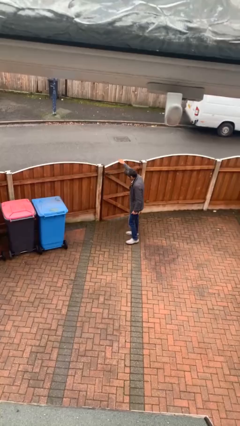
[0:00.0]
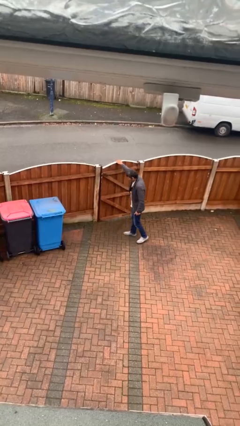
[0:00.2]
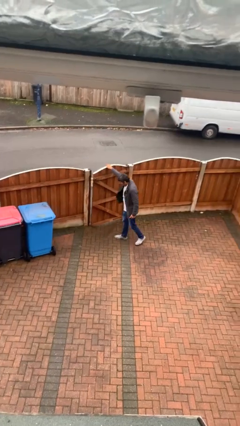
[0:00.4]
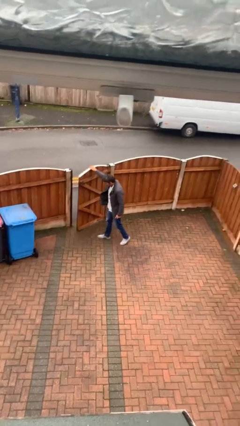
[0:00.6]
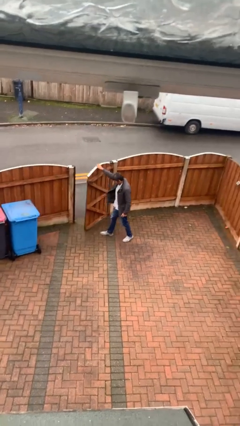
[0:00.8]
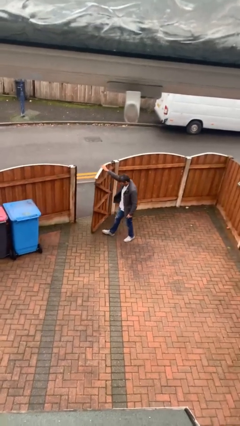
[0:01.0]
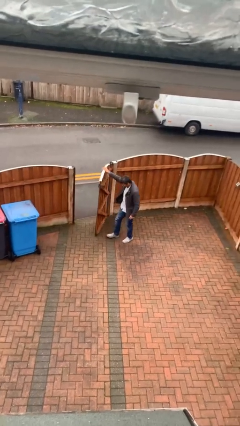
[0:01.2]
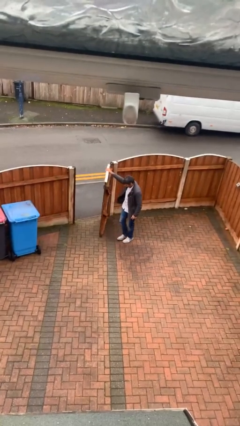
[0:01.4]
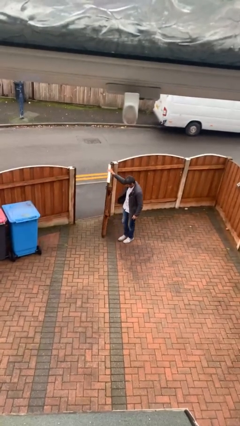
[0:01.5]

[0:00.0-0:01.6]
person opens facility door

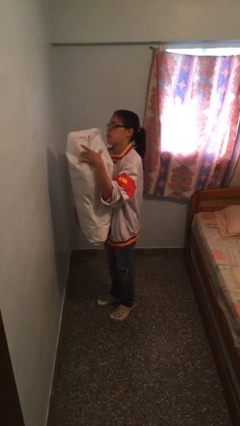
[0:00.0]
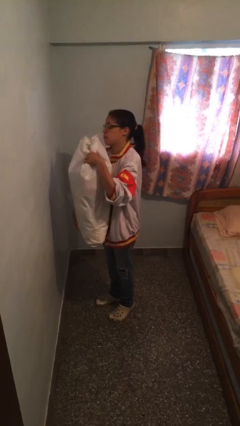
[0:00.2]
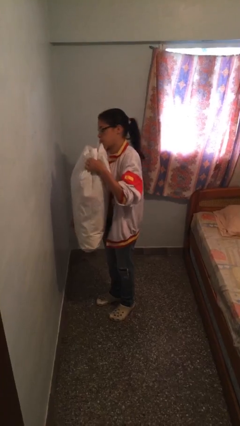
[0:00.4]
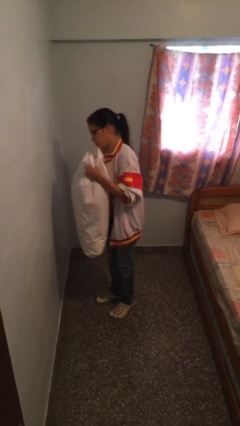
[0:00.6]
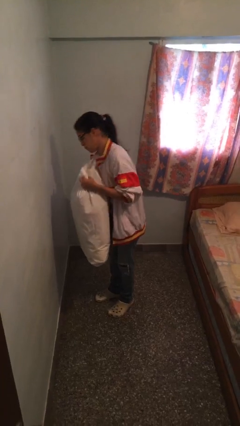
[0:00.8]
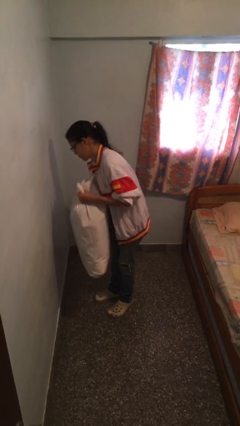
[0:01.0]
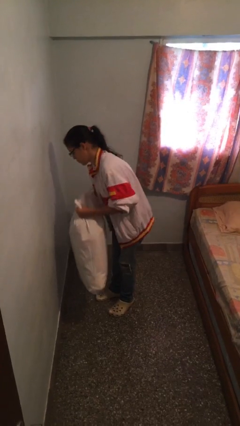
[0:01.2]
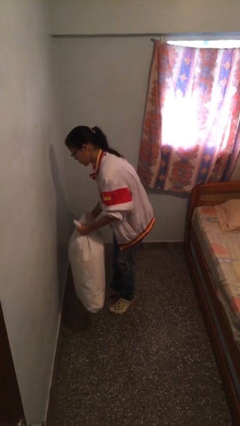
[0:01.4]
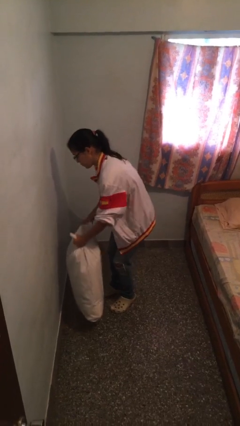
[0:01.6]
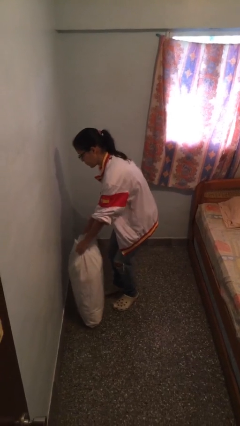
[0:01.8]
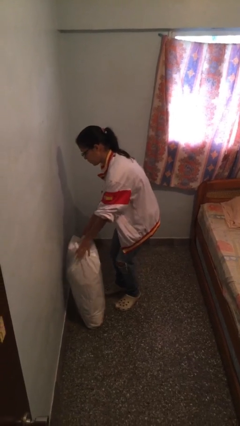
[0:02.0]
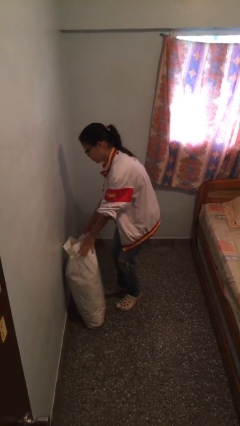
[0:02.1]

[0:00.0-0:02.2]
person puts down object on floor

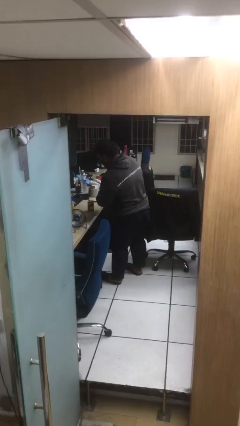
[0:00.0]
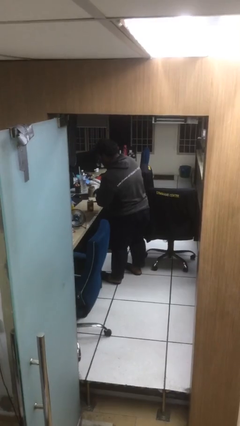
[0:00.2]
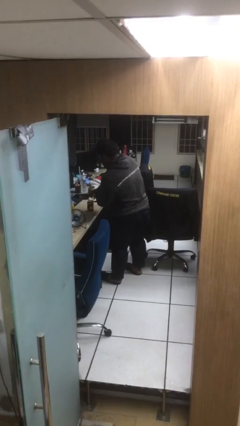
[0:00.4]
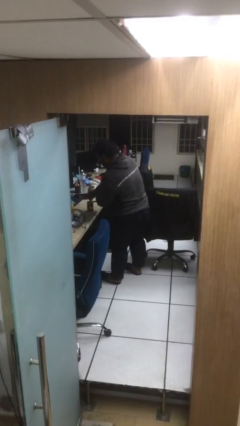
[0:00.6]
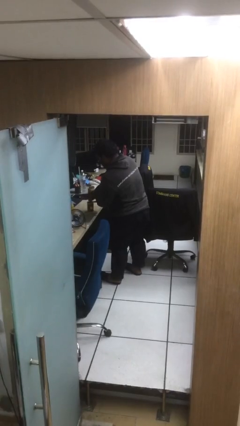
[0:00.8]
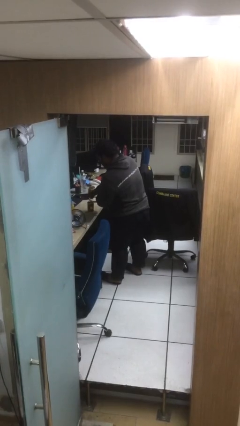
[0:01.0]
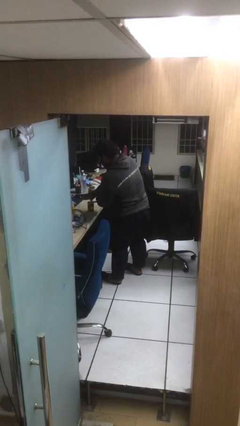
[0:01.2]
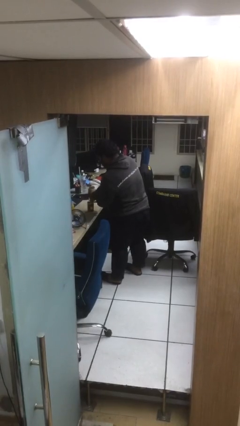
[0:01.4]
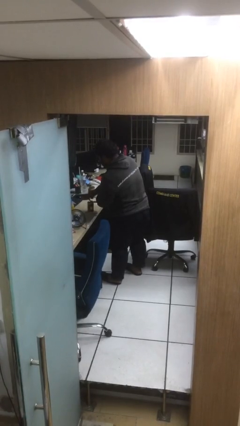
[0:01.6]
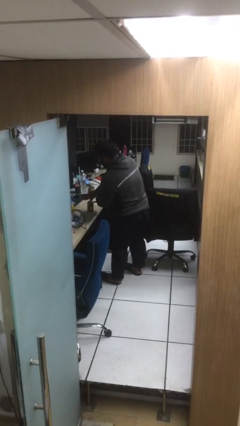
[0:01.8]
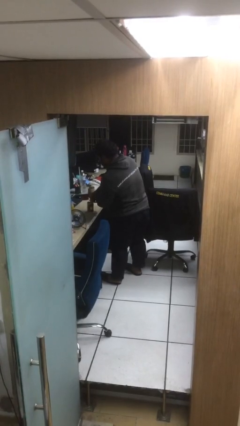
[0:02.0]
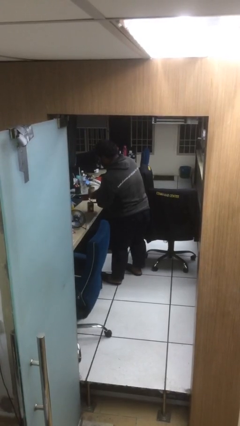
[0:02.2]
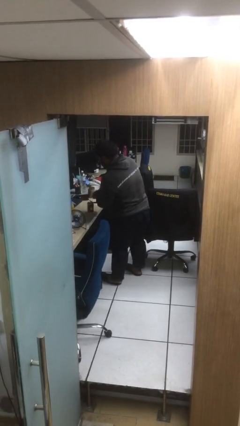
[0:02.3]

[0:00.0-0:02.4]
person opens can with can opener

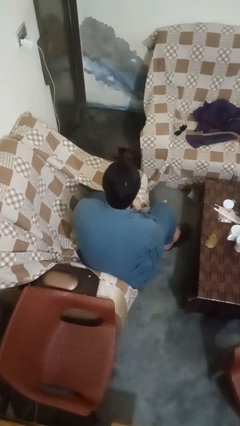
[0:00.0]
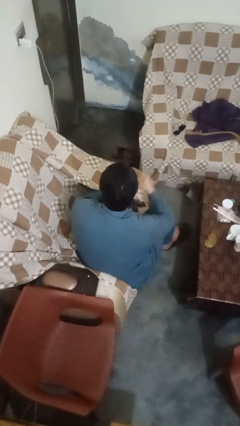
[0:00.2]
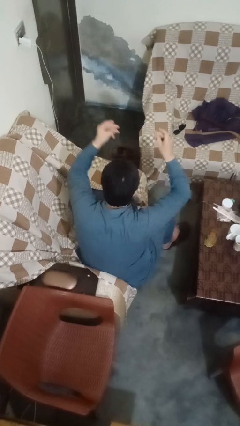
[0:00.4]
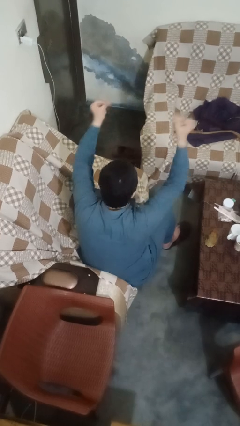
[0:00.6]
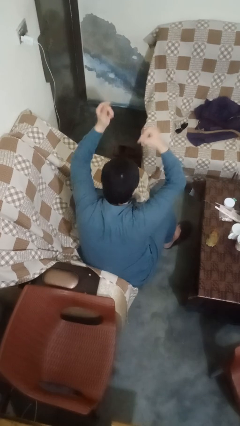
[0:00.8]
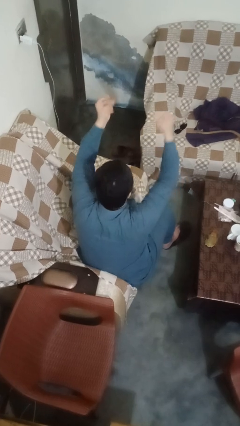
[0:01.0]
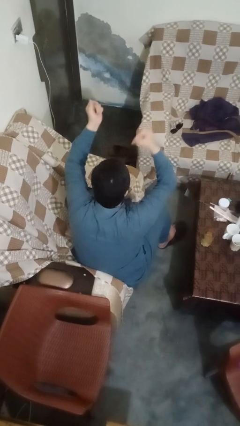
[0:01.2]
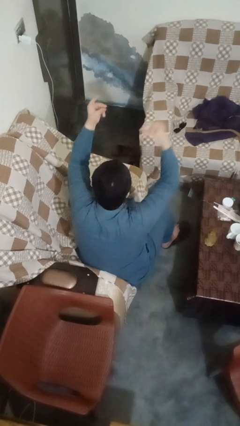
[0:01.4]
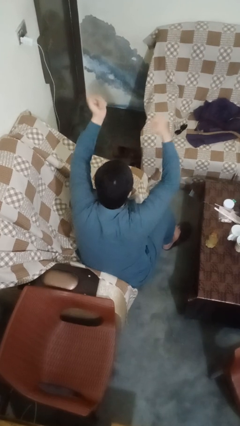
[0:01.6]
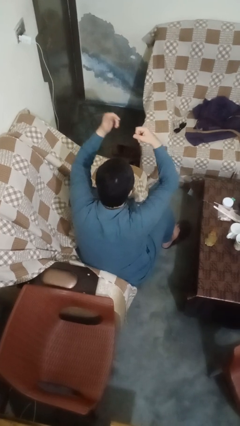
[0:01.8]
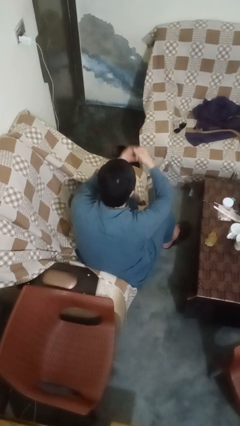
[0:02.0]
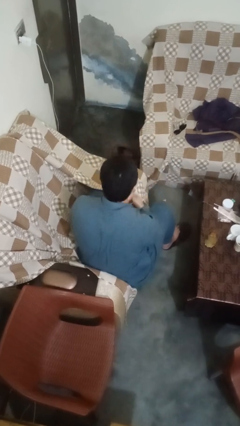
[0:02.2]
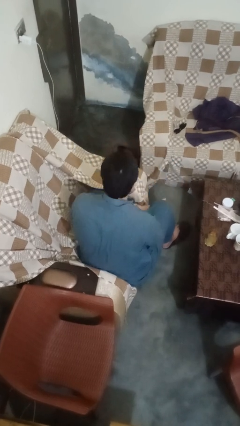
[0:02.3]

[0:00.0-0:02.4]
person snaps fingers

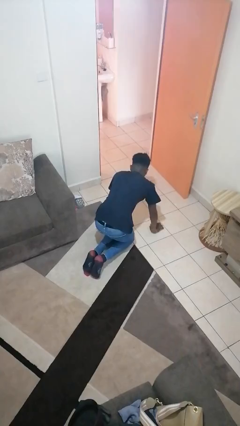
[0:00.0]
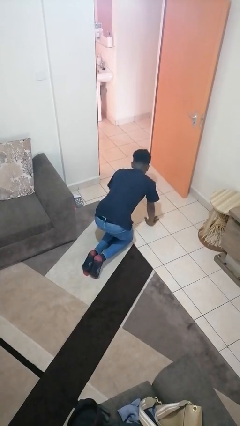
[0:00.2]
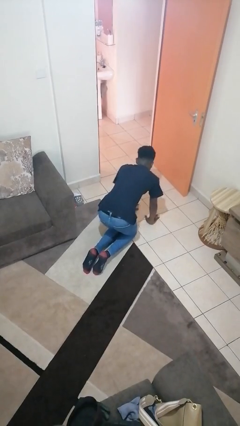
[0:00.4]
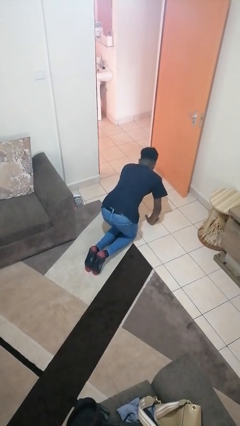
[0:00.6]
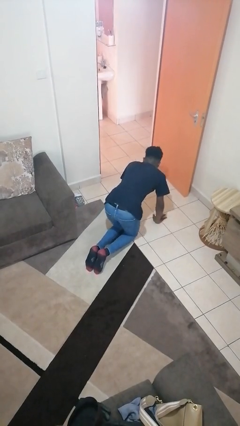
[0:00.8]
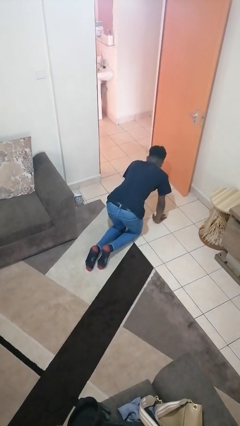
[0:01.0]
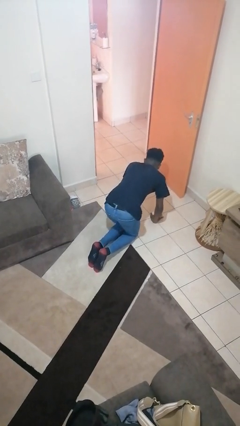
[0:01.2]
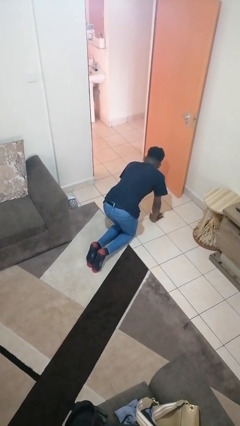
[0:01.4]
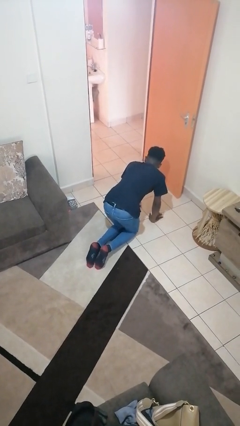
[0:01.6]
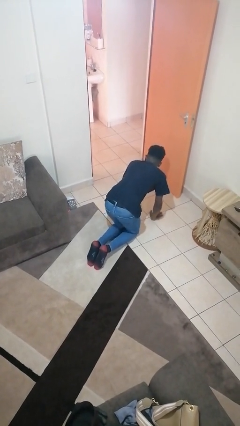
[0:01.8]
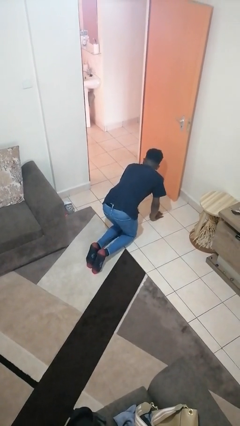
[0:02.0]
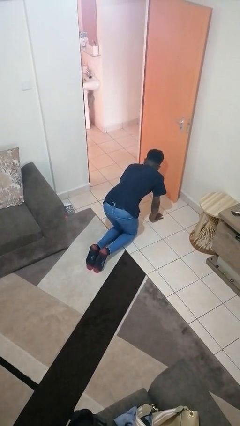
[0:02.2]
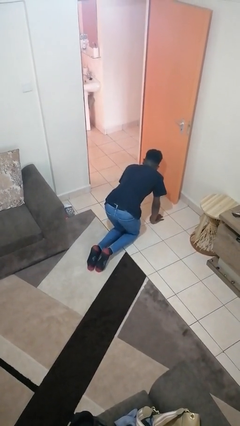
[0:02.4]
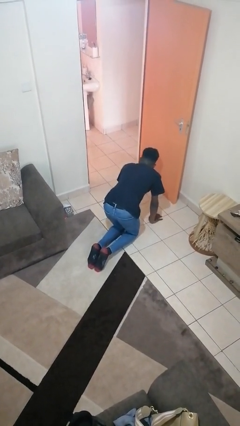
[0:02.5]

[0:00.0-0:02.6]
person crawls

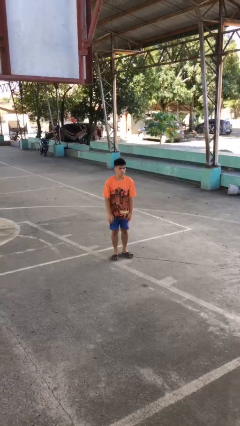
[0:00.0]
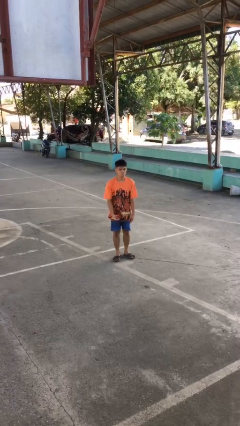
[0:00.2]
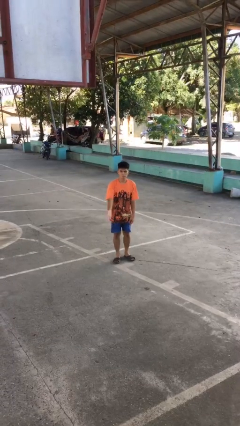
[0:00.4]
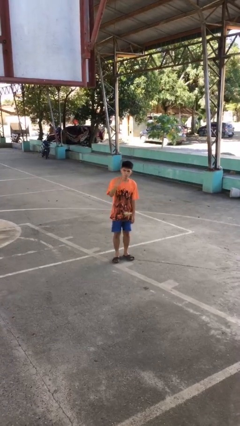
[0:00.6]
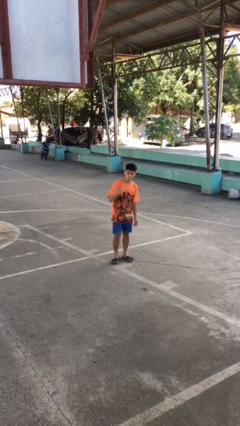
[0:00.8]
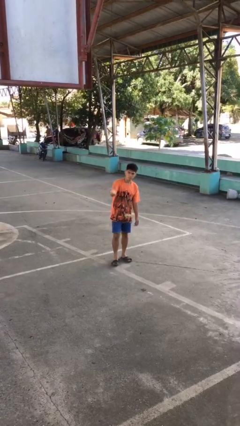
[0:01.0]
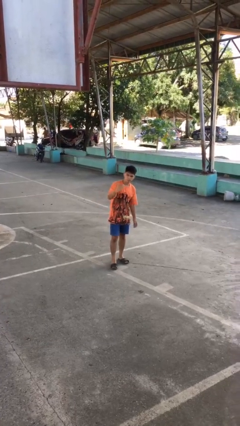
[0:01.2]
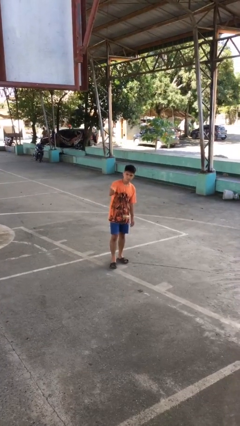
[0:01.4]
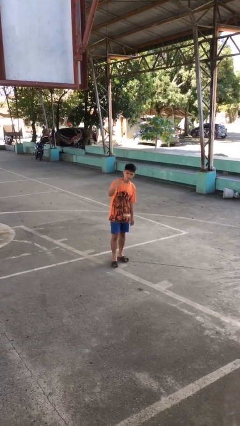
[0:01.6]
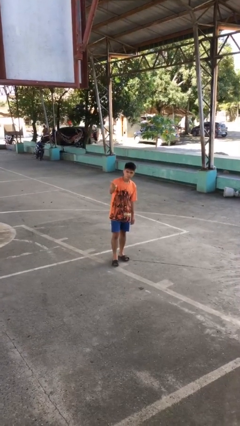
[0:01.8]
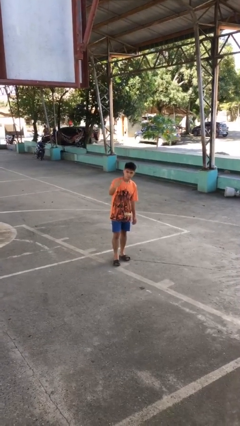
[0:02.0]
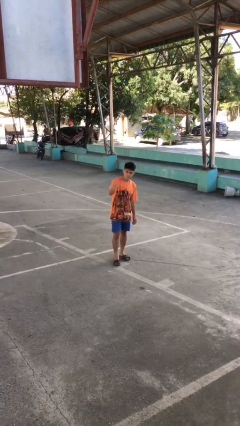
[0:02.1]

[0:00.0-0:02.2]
person gestures come here

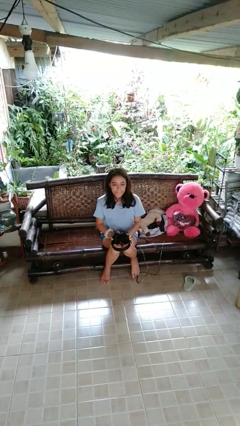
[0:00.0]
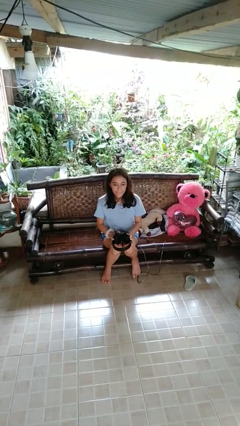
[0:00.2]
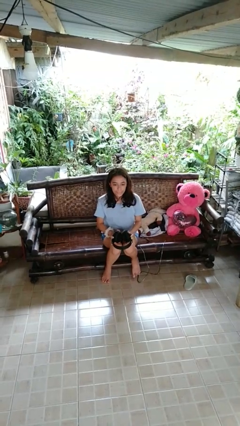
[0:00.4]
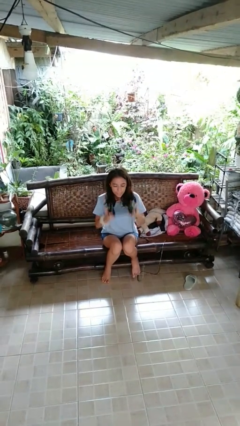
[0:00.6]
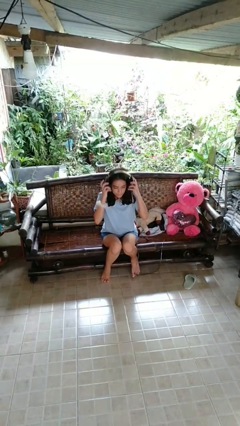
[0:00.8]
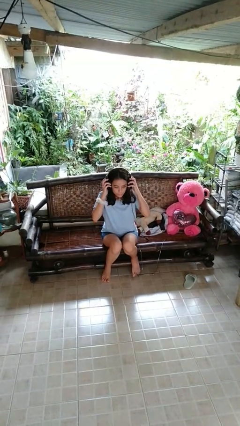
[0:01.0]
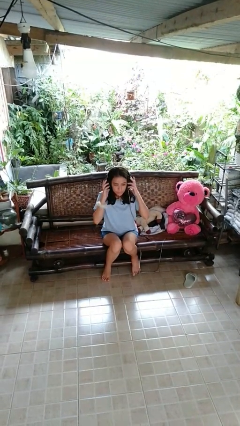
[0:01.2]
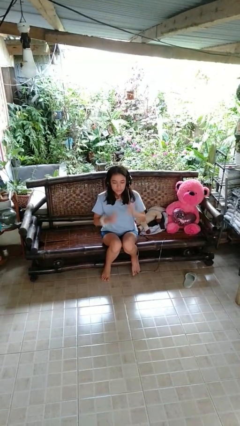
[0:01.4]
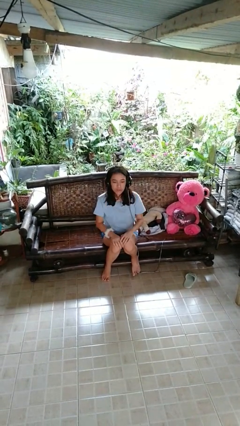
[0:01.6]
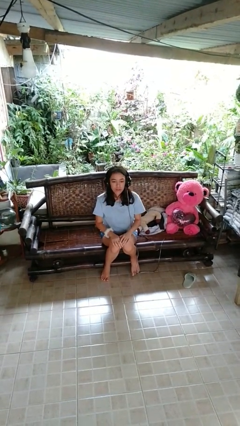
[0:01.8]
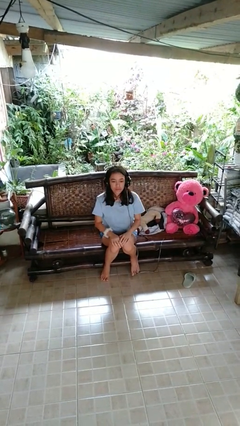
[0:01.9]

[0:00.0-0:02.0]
person puts on headphones

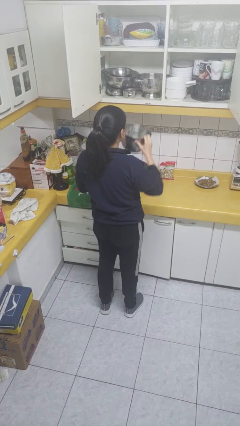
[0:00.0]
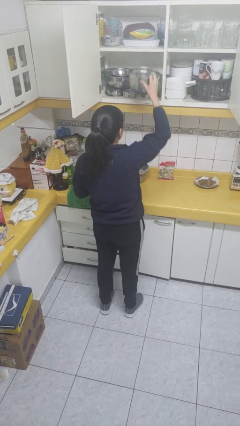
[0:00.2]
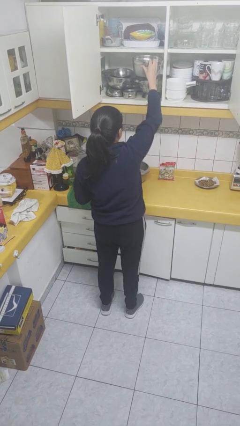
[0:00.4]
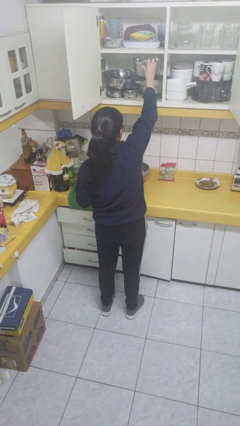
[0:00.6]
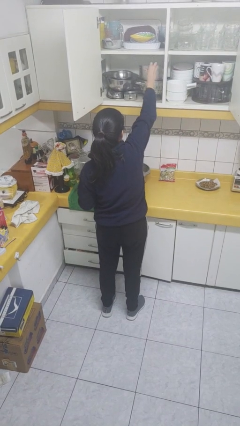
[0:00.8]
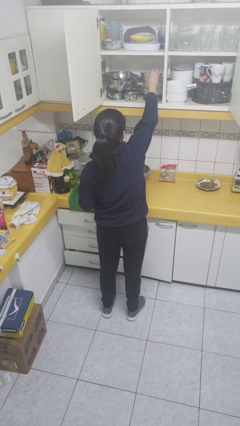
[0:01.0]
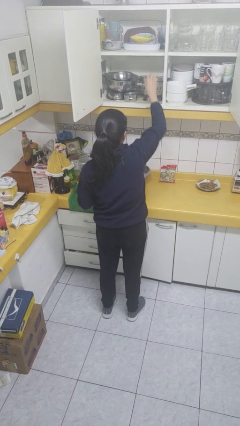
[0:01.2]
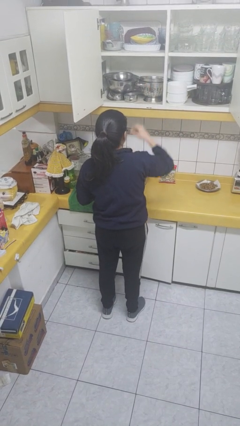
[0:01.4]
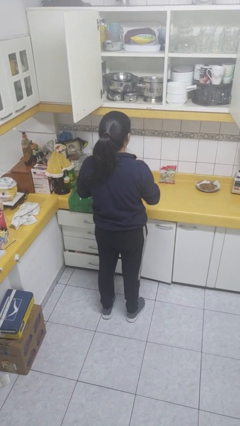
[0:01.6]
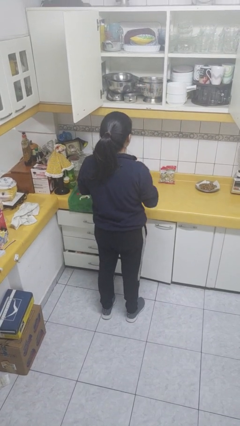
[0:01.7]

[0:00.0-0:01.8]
person puts down object into cabinet
